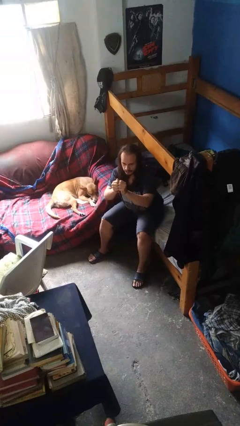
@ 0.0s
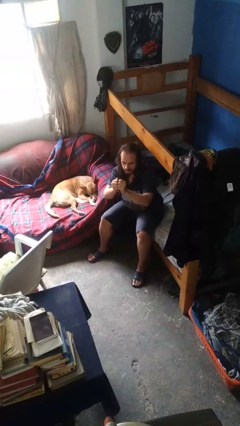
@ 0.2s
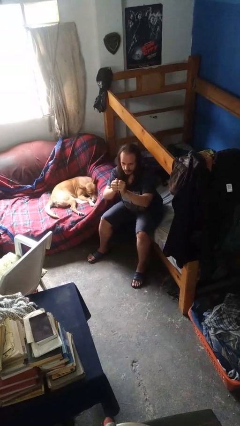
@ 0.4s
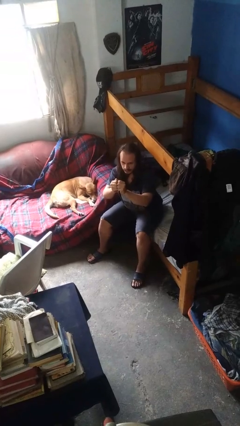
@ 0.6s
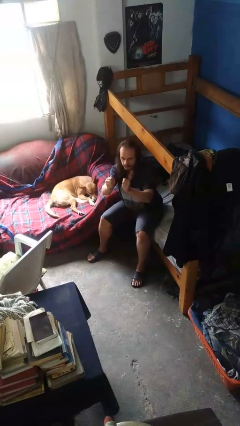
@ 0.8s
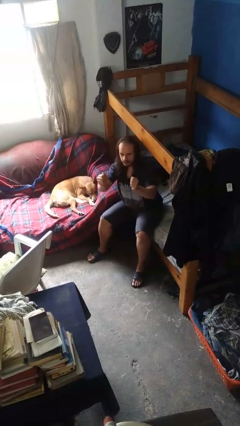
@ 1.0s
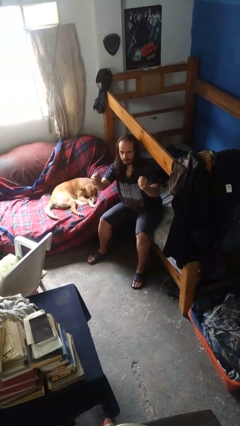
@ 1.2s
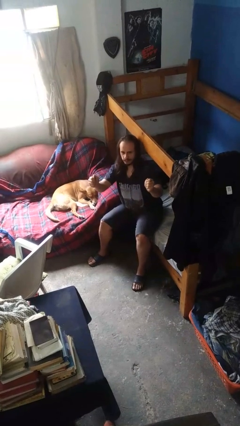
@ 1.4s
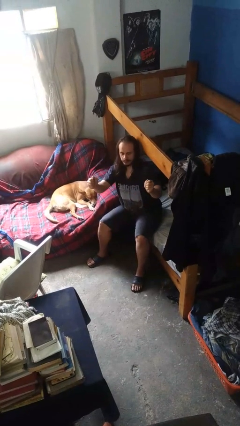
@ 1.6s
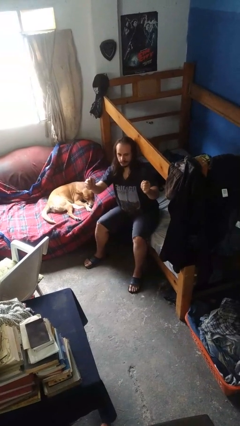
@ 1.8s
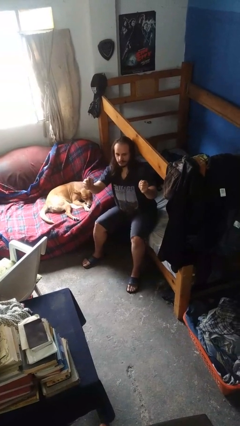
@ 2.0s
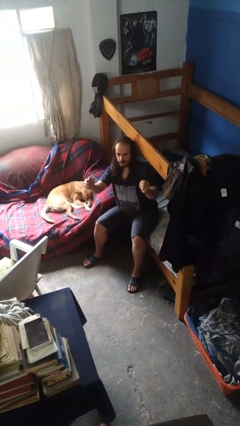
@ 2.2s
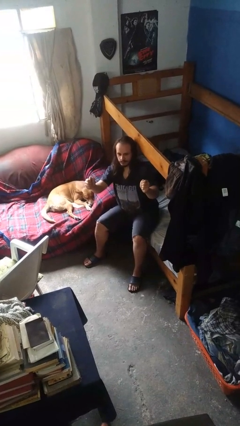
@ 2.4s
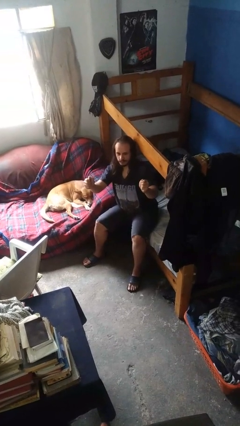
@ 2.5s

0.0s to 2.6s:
person gestures zoom in

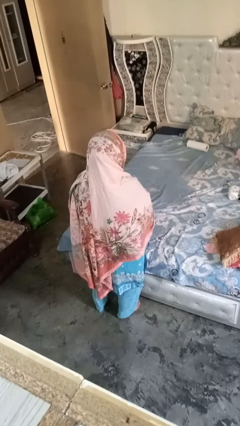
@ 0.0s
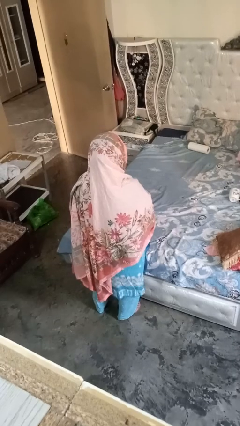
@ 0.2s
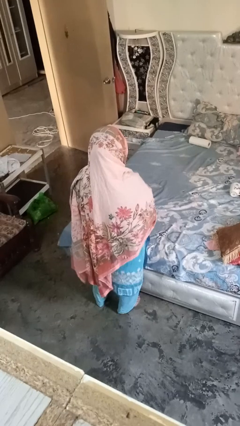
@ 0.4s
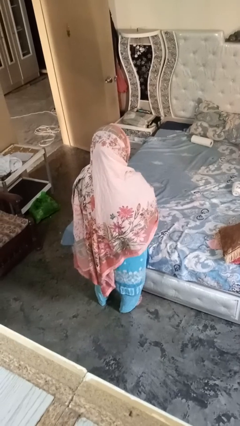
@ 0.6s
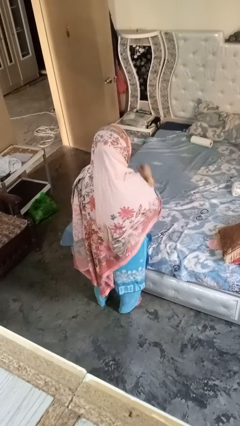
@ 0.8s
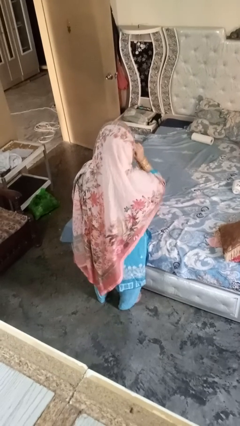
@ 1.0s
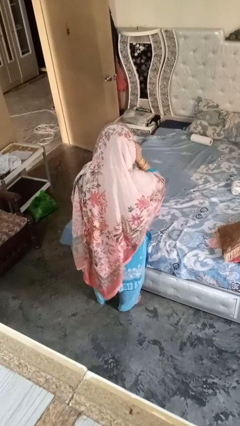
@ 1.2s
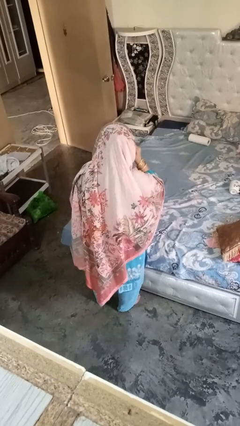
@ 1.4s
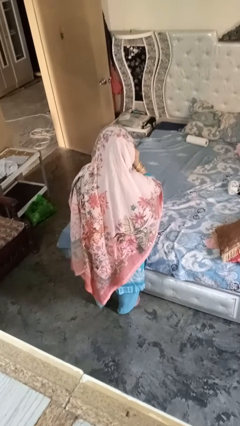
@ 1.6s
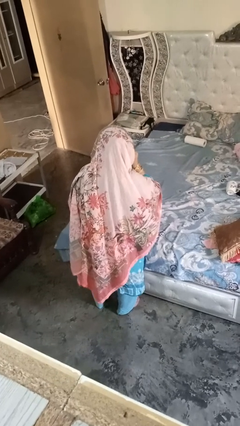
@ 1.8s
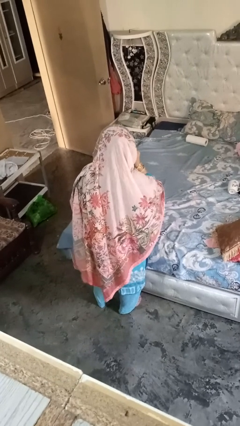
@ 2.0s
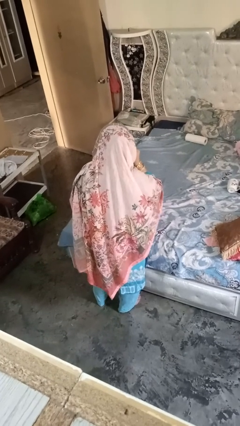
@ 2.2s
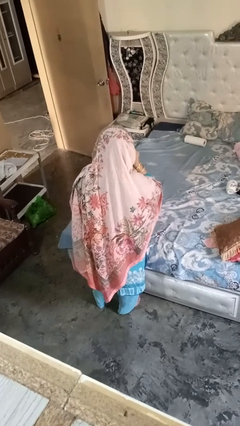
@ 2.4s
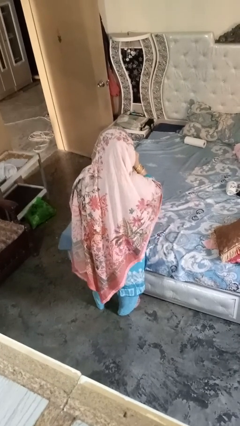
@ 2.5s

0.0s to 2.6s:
person gestures listen closely

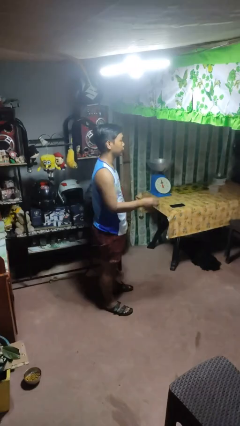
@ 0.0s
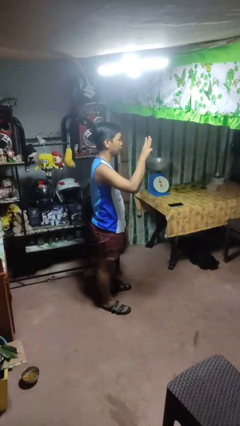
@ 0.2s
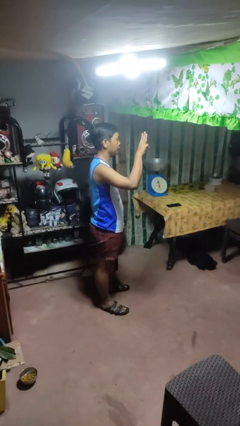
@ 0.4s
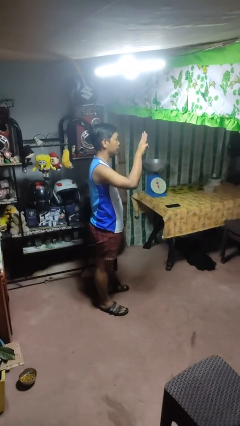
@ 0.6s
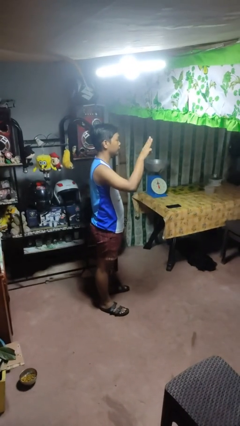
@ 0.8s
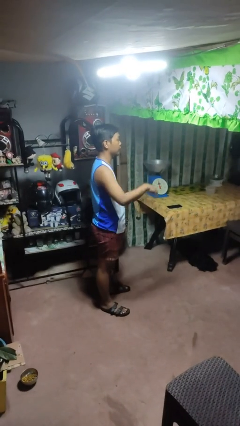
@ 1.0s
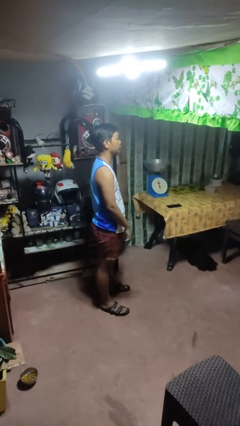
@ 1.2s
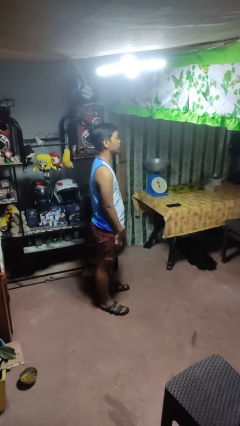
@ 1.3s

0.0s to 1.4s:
person gestures number three

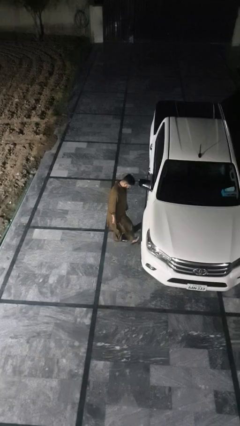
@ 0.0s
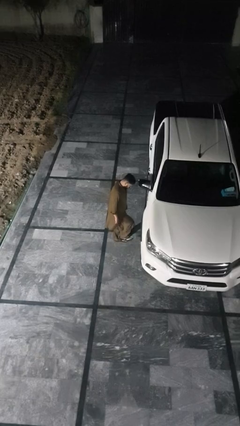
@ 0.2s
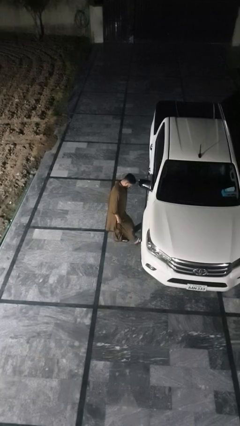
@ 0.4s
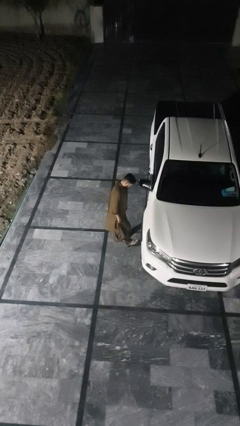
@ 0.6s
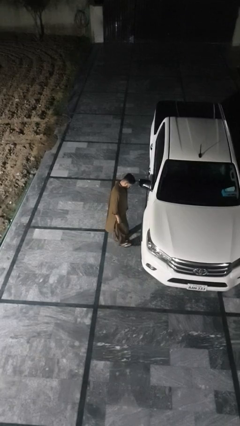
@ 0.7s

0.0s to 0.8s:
person kicks car tires

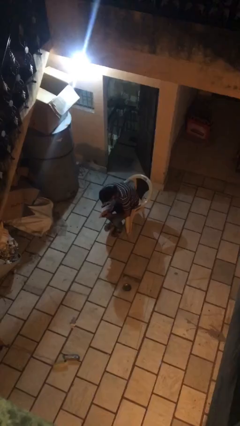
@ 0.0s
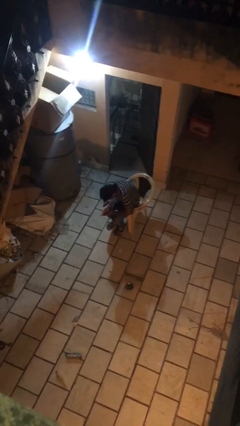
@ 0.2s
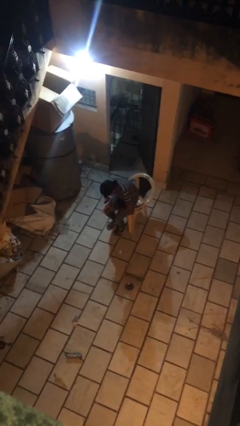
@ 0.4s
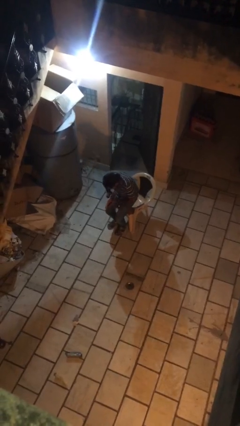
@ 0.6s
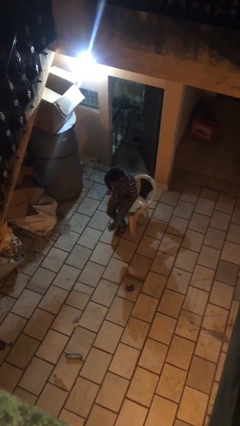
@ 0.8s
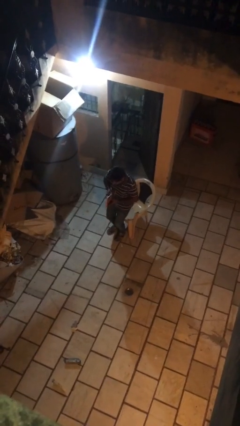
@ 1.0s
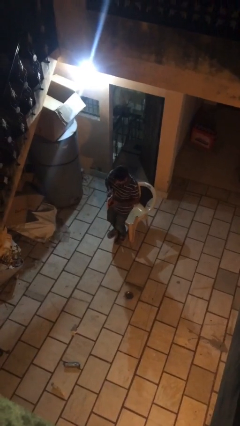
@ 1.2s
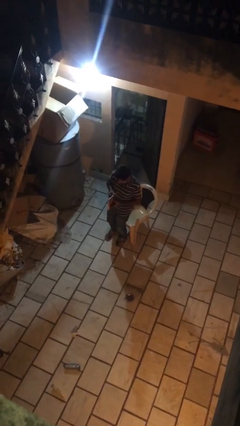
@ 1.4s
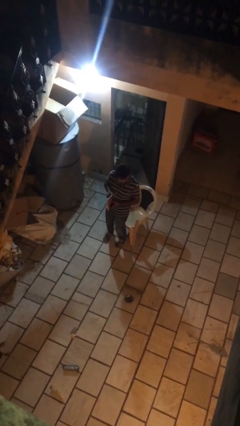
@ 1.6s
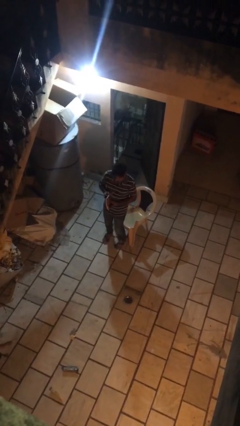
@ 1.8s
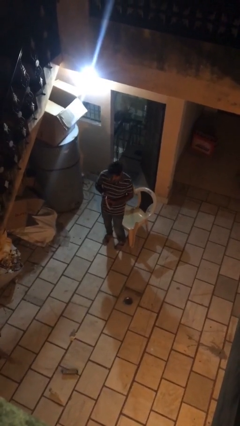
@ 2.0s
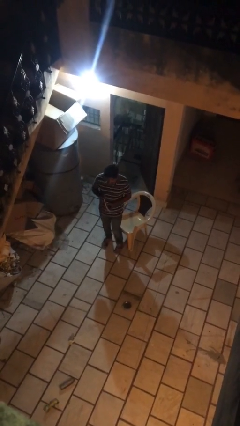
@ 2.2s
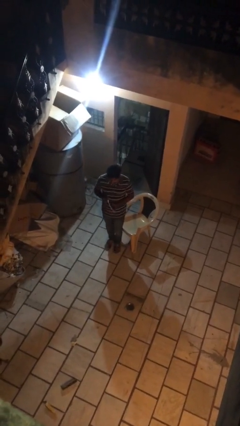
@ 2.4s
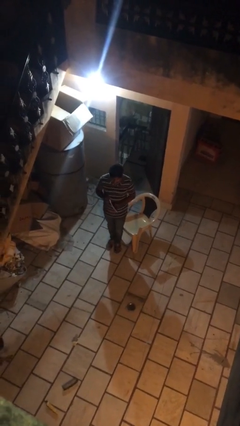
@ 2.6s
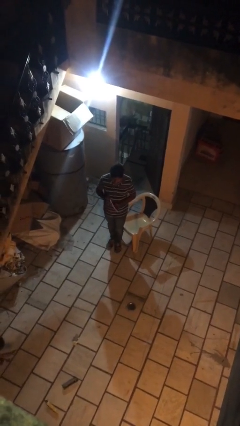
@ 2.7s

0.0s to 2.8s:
person stands up

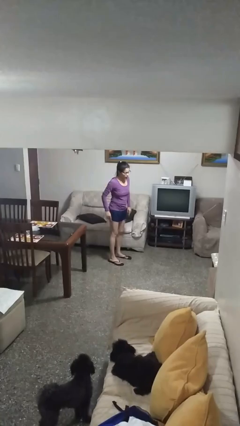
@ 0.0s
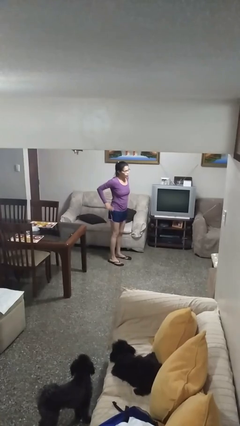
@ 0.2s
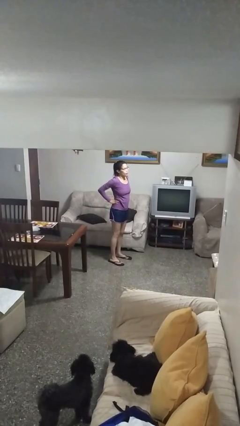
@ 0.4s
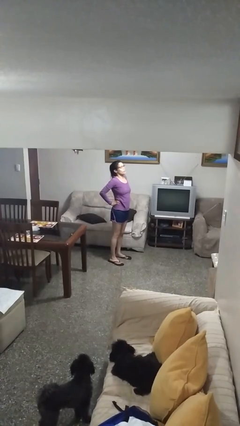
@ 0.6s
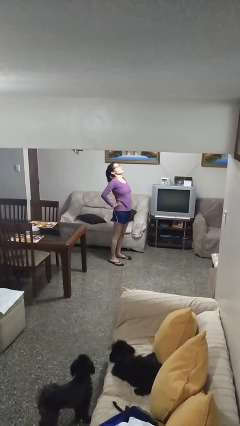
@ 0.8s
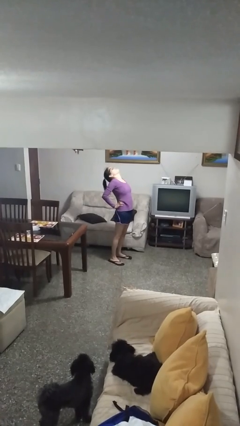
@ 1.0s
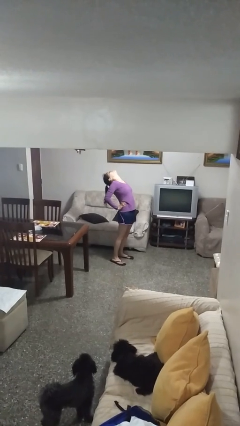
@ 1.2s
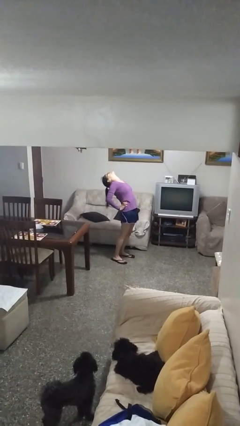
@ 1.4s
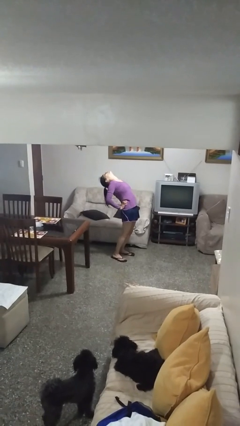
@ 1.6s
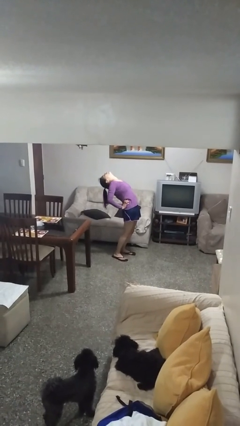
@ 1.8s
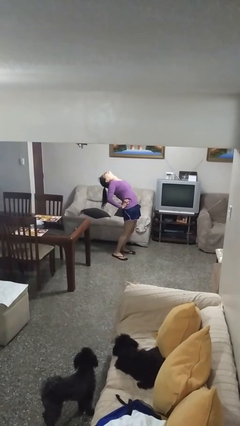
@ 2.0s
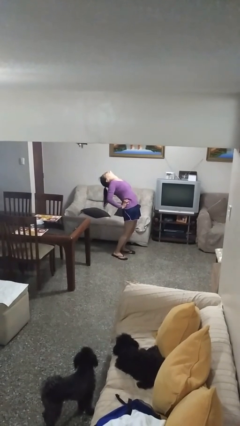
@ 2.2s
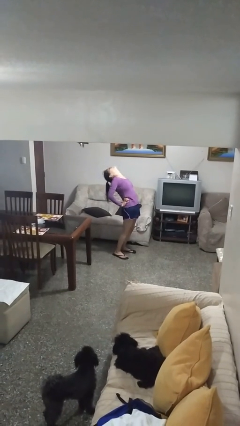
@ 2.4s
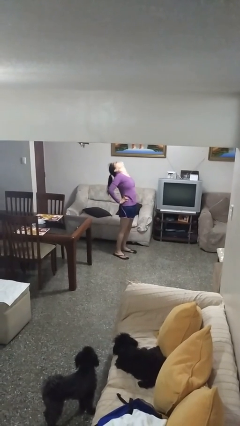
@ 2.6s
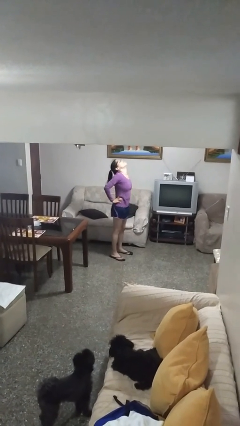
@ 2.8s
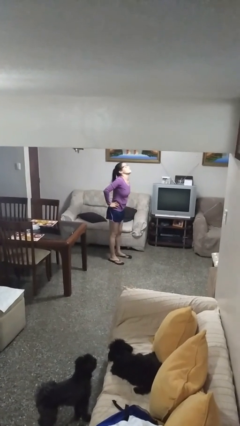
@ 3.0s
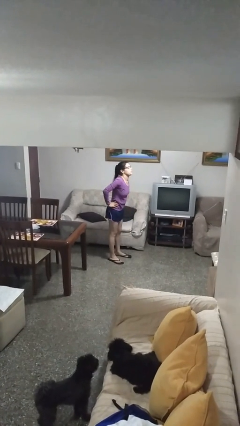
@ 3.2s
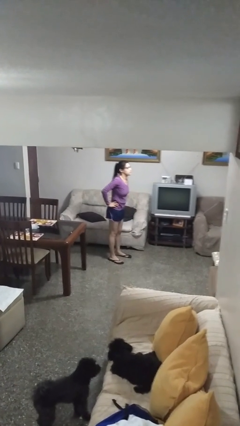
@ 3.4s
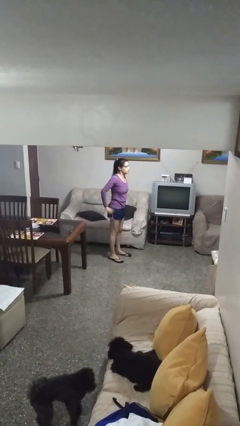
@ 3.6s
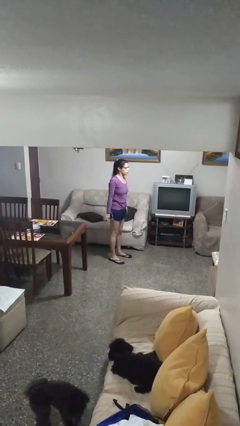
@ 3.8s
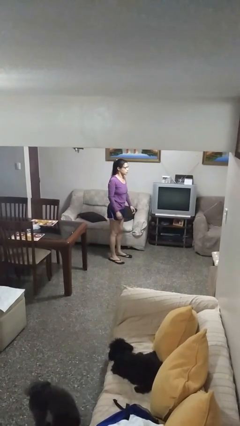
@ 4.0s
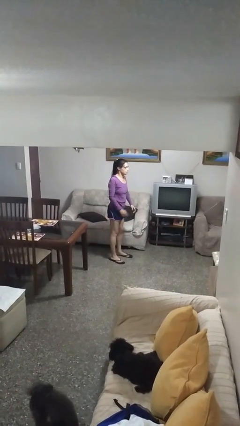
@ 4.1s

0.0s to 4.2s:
person stretches back

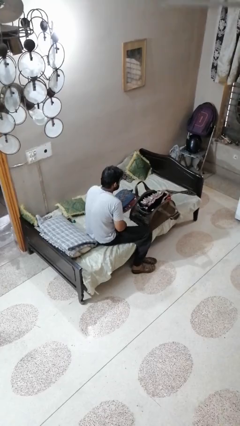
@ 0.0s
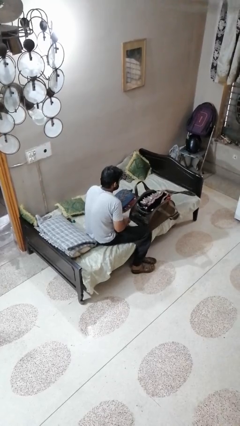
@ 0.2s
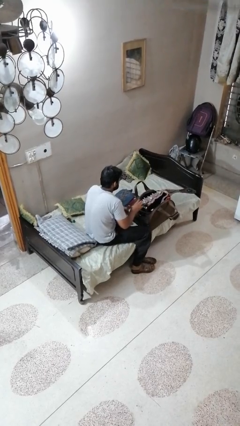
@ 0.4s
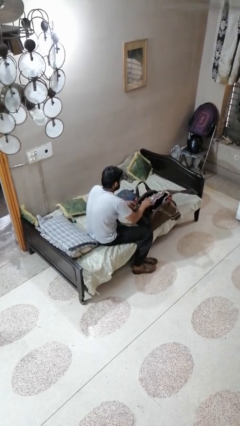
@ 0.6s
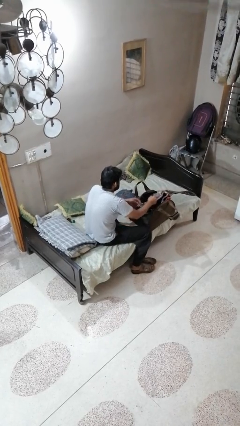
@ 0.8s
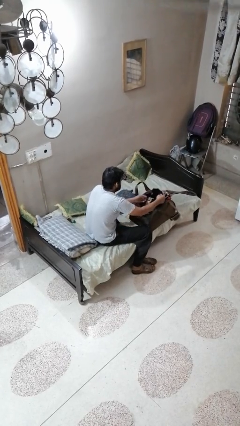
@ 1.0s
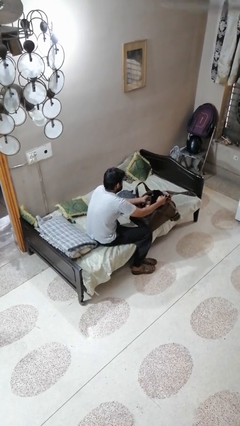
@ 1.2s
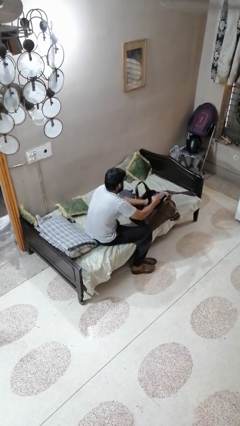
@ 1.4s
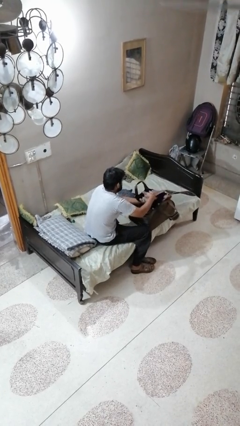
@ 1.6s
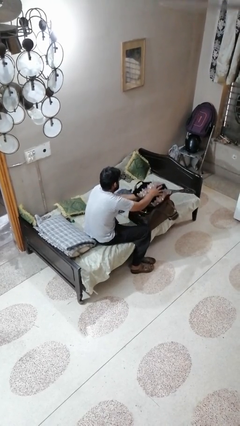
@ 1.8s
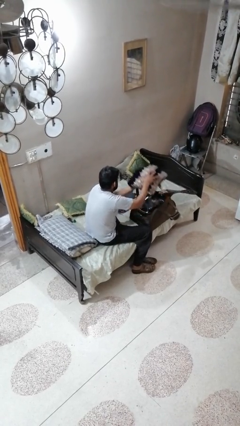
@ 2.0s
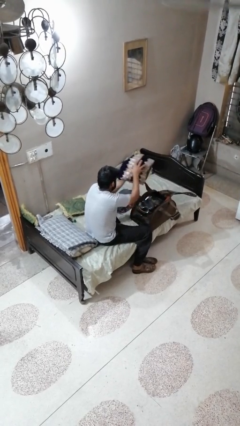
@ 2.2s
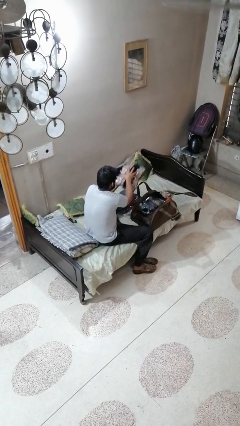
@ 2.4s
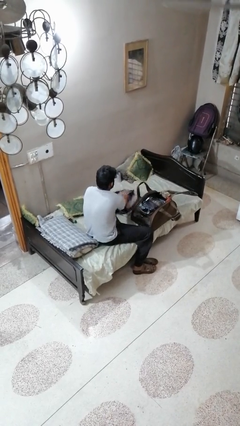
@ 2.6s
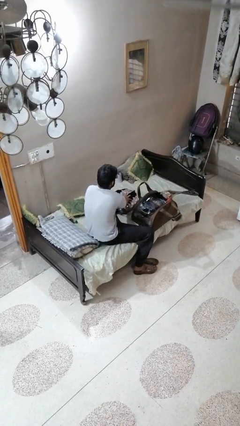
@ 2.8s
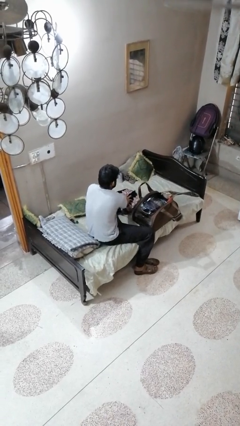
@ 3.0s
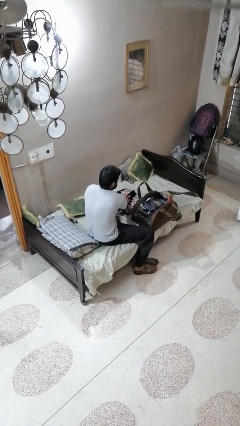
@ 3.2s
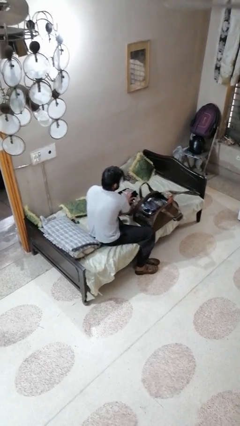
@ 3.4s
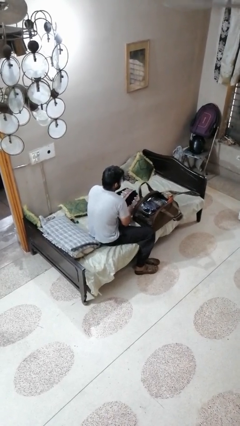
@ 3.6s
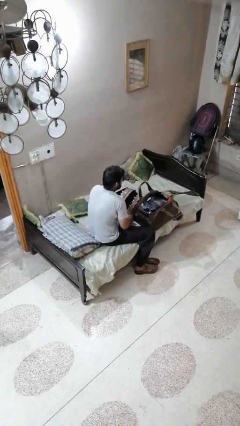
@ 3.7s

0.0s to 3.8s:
person unloads clothes from suitcase
